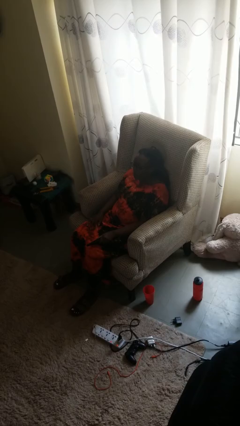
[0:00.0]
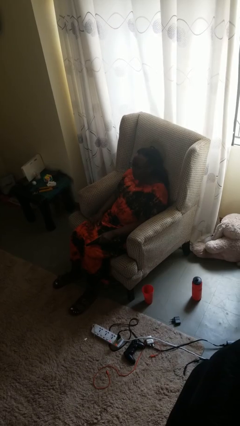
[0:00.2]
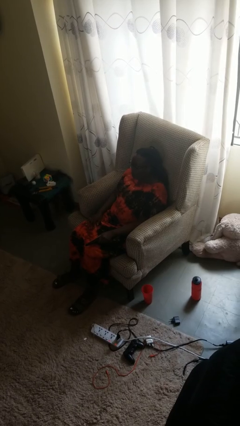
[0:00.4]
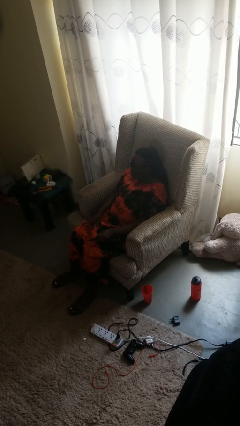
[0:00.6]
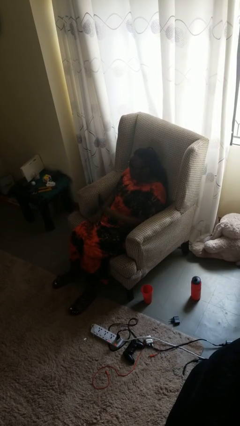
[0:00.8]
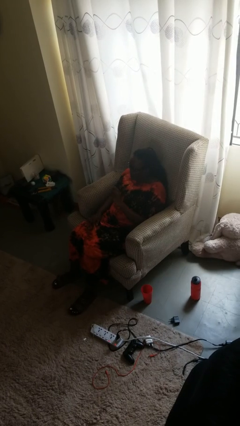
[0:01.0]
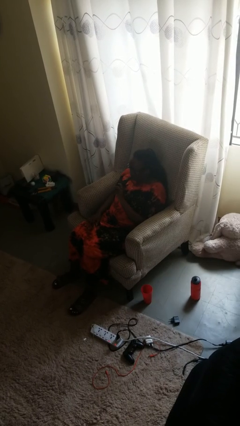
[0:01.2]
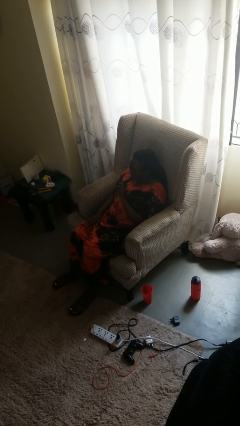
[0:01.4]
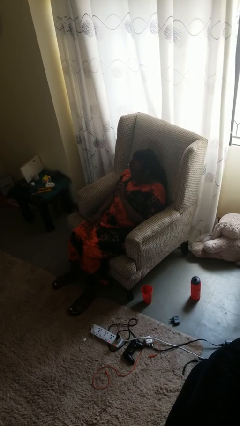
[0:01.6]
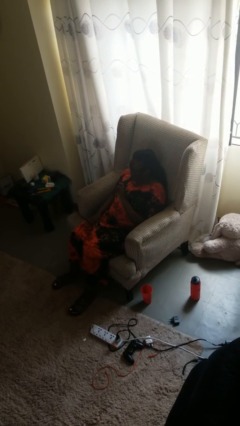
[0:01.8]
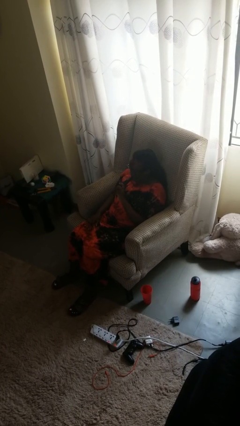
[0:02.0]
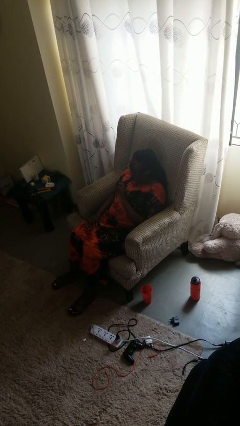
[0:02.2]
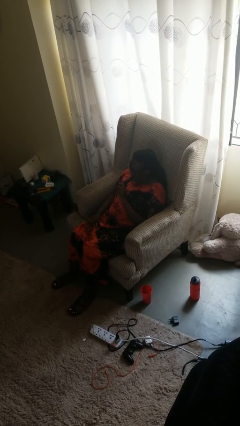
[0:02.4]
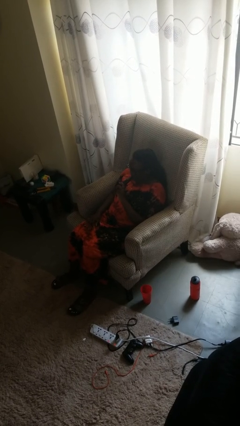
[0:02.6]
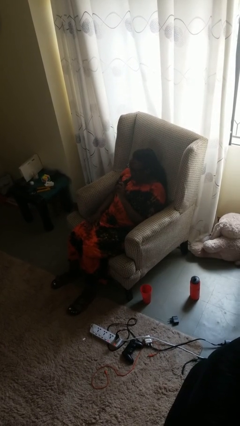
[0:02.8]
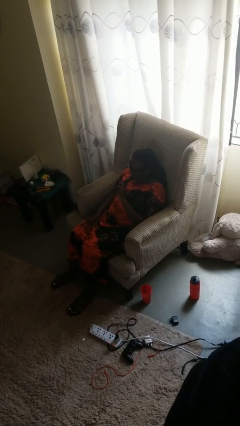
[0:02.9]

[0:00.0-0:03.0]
person vapes

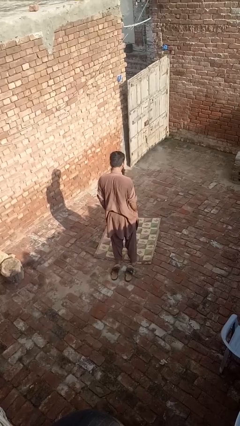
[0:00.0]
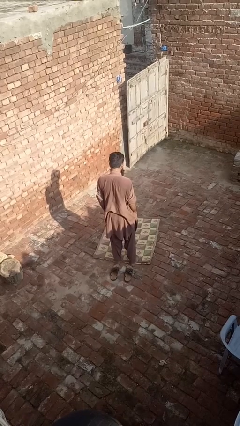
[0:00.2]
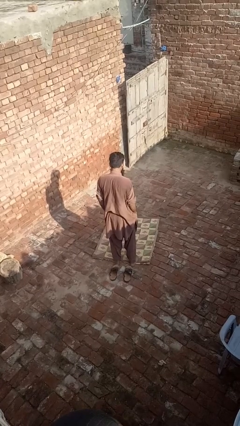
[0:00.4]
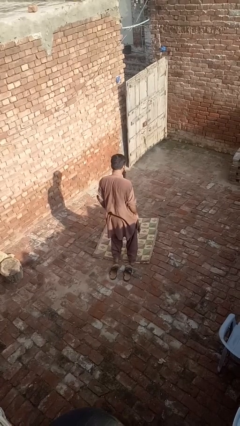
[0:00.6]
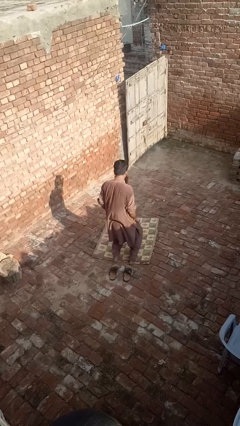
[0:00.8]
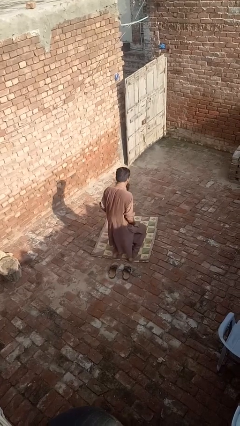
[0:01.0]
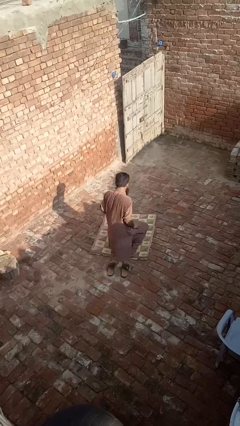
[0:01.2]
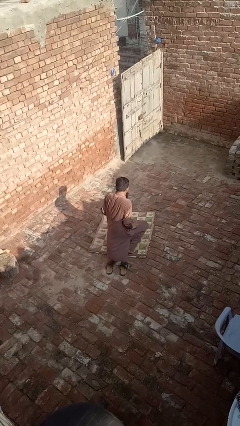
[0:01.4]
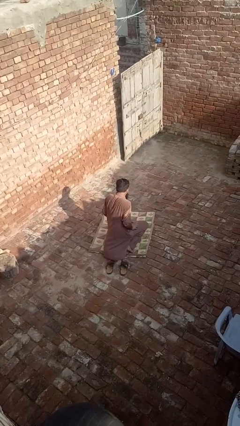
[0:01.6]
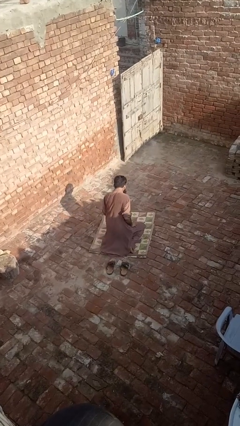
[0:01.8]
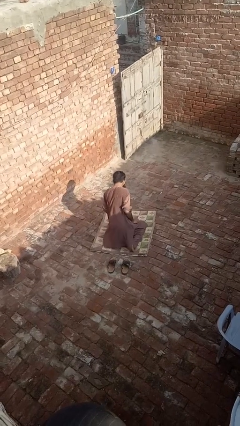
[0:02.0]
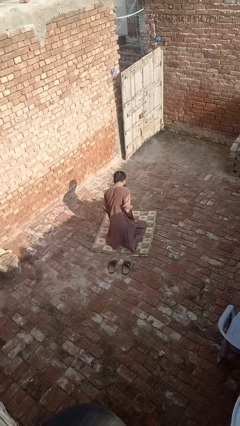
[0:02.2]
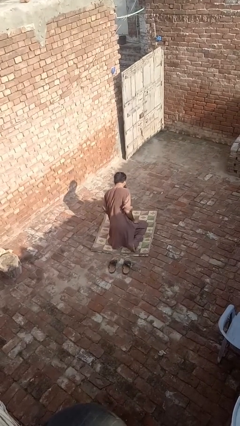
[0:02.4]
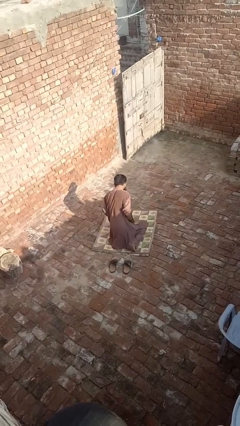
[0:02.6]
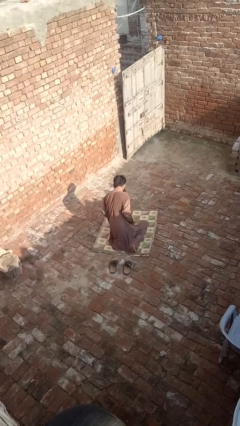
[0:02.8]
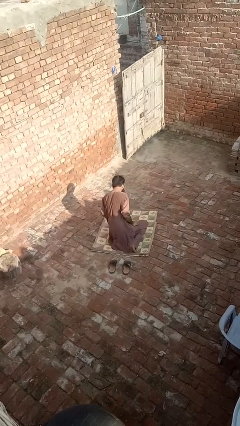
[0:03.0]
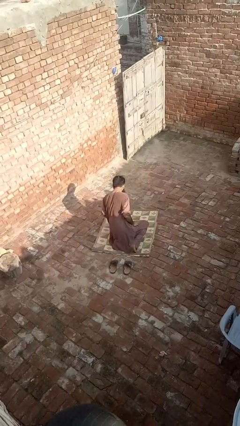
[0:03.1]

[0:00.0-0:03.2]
person kneels

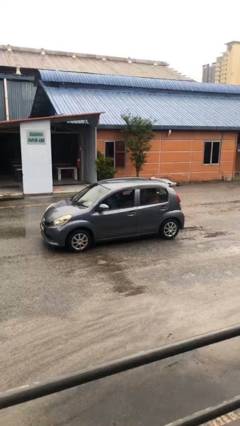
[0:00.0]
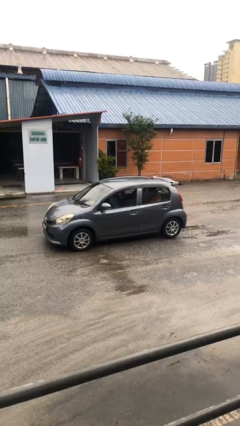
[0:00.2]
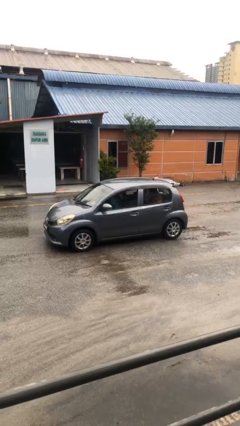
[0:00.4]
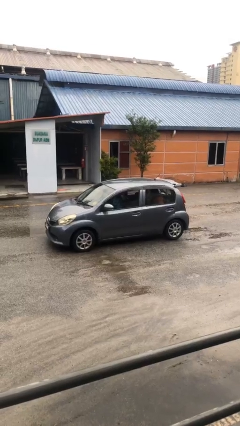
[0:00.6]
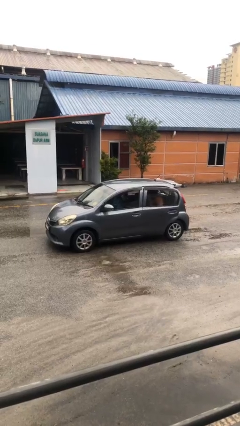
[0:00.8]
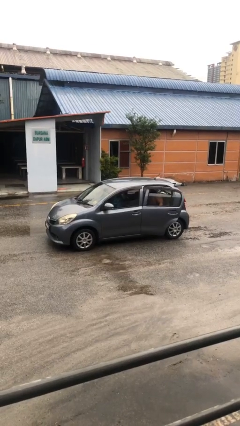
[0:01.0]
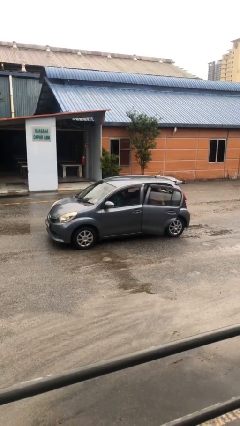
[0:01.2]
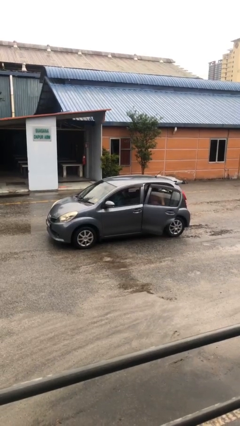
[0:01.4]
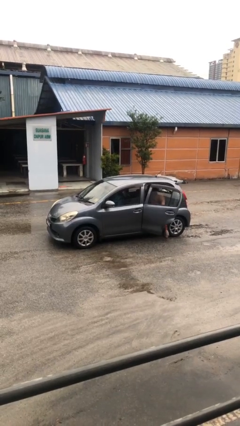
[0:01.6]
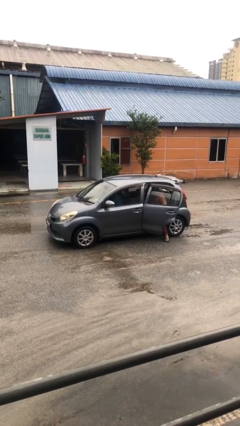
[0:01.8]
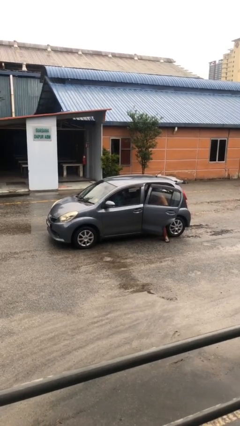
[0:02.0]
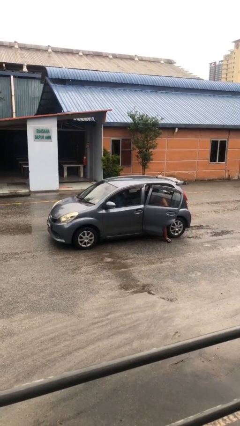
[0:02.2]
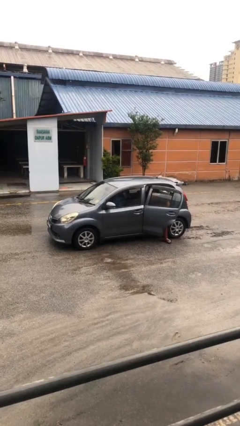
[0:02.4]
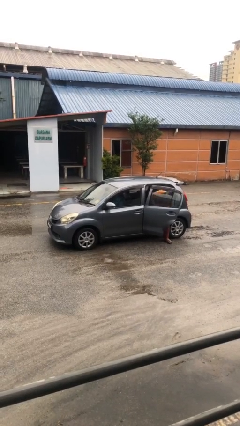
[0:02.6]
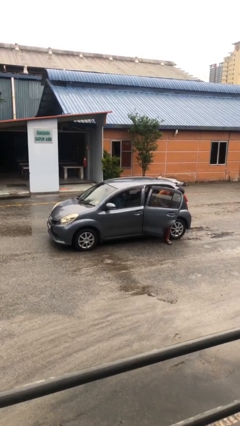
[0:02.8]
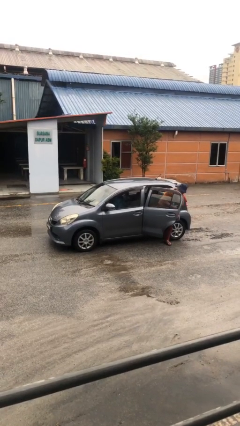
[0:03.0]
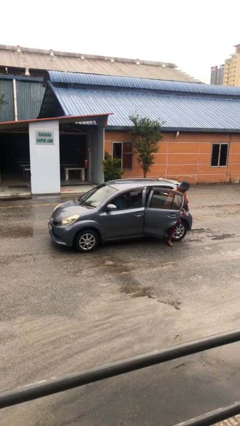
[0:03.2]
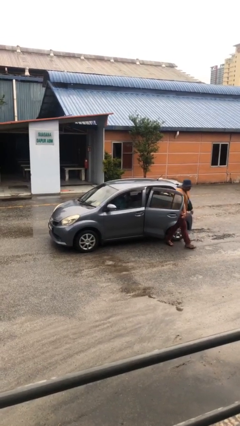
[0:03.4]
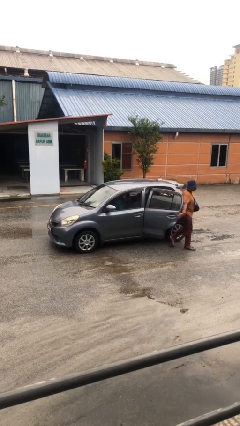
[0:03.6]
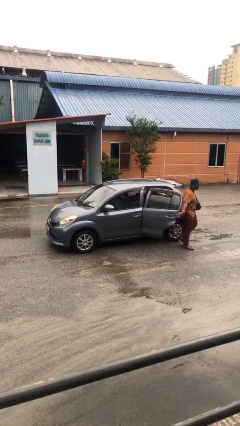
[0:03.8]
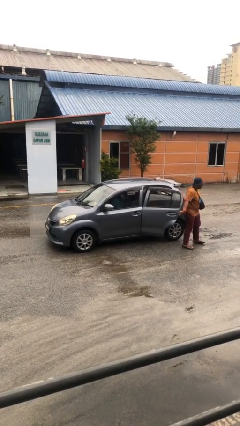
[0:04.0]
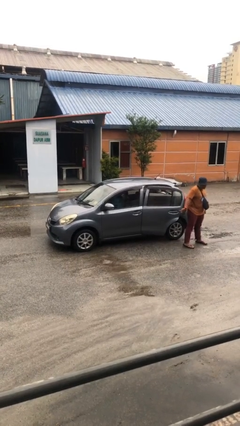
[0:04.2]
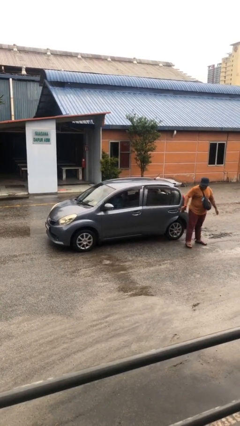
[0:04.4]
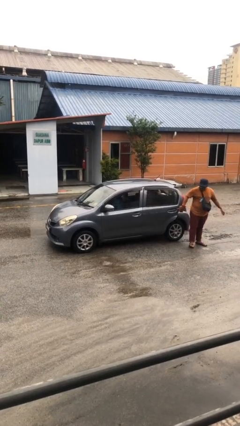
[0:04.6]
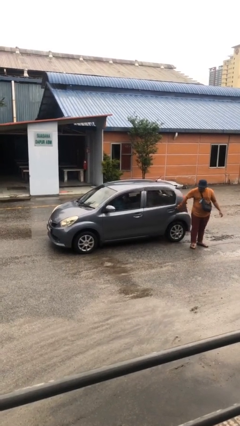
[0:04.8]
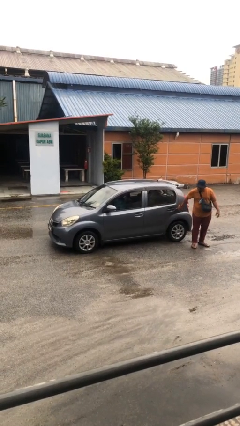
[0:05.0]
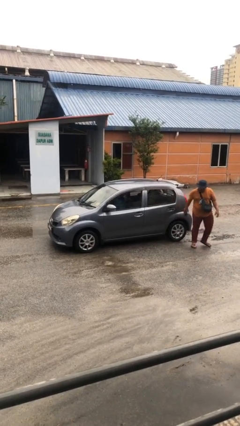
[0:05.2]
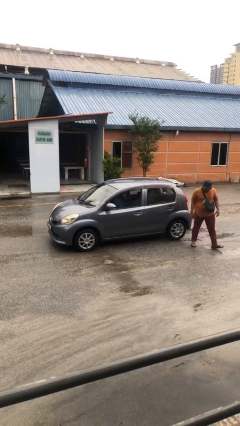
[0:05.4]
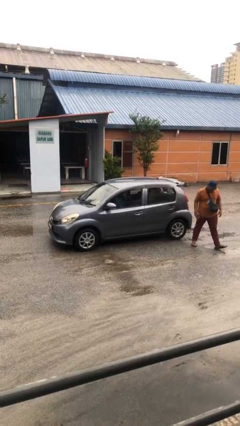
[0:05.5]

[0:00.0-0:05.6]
car drops off person

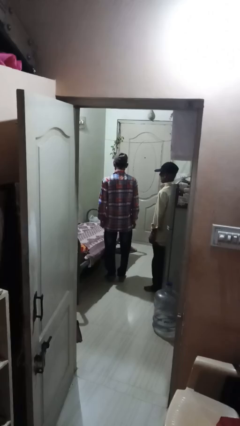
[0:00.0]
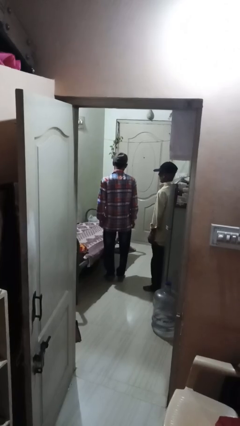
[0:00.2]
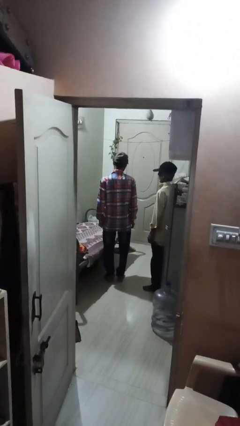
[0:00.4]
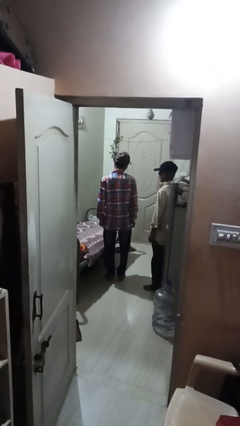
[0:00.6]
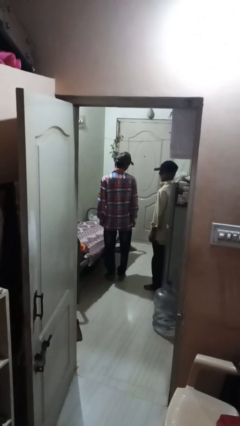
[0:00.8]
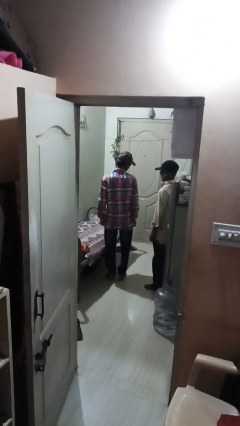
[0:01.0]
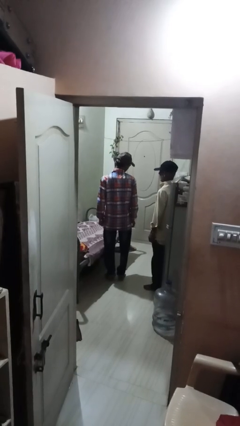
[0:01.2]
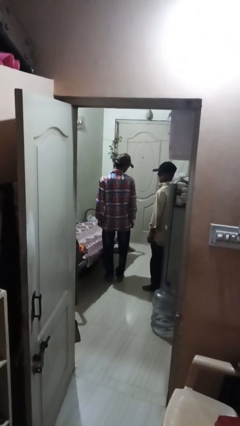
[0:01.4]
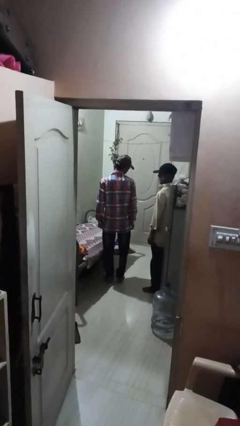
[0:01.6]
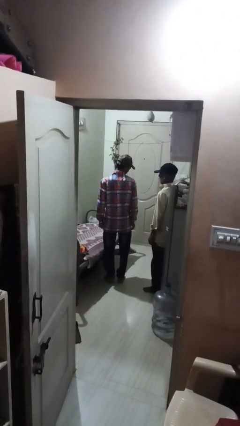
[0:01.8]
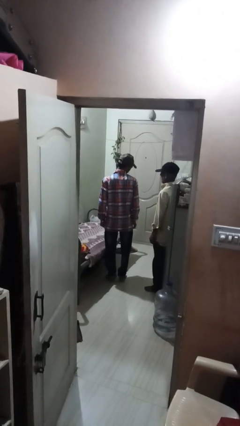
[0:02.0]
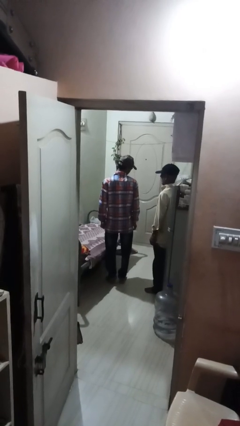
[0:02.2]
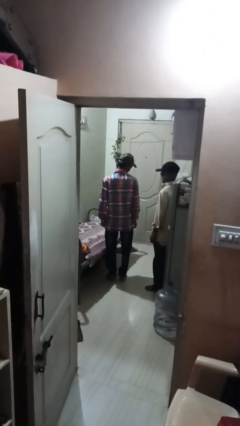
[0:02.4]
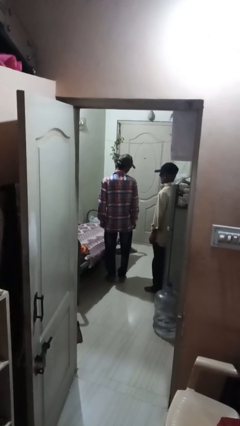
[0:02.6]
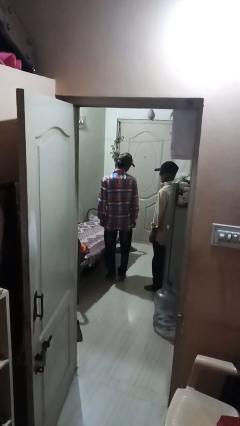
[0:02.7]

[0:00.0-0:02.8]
person looks over shoulder

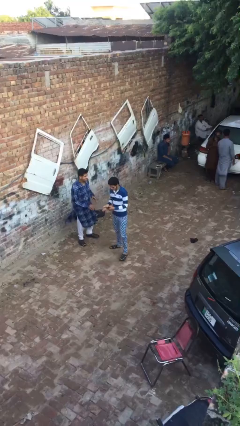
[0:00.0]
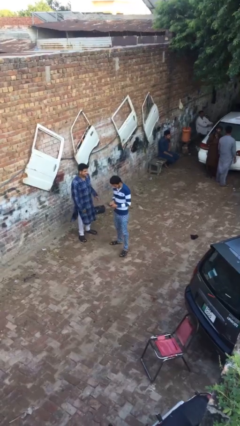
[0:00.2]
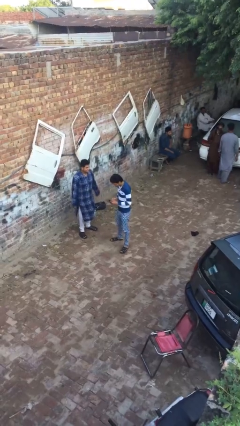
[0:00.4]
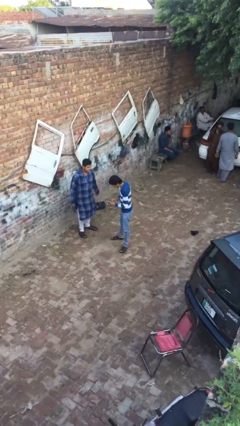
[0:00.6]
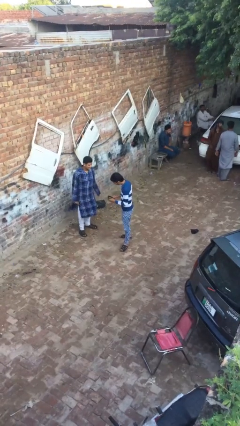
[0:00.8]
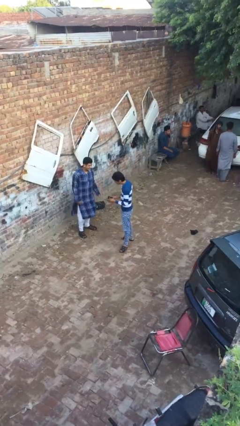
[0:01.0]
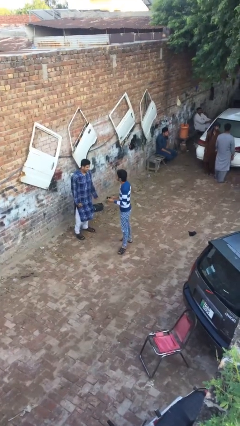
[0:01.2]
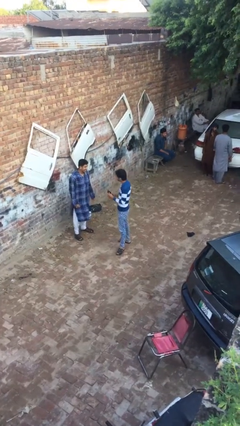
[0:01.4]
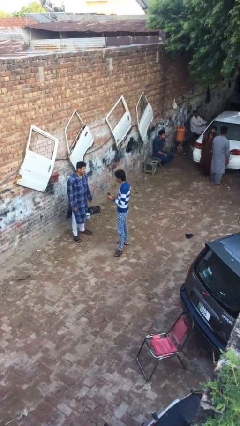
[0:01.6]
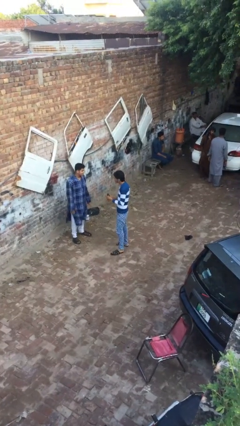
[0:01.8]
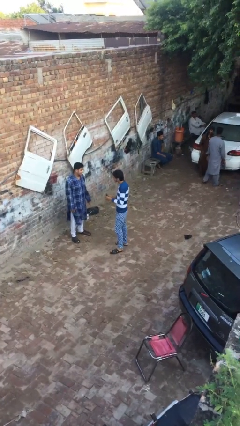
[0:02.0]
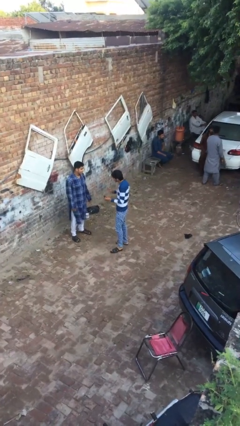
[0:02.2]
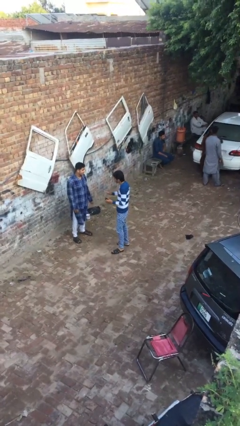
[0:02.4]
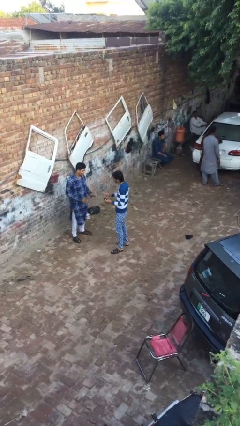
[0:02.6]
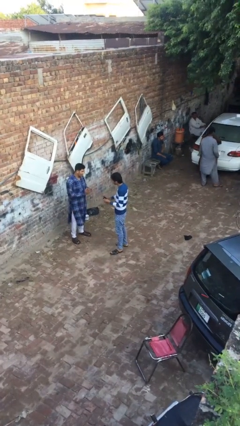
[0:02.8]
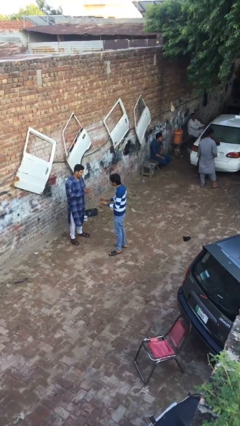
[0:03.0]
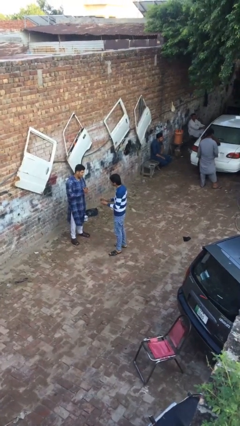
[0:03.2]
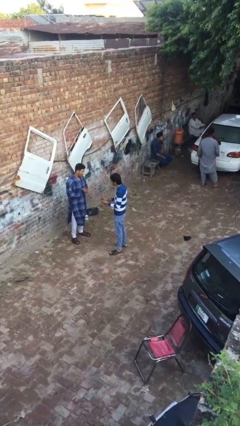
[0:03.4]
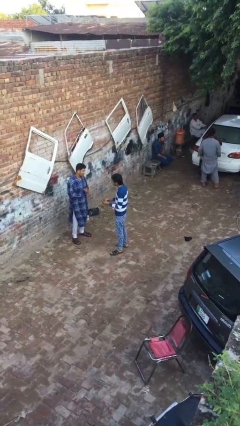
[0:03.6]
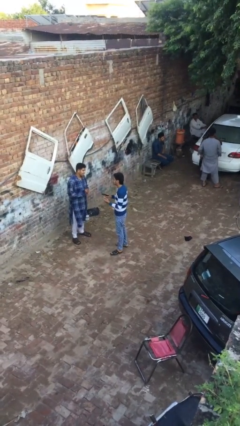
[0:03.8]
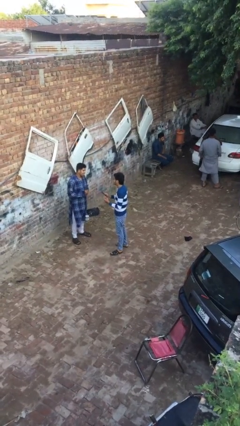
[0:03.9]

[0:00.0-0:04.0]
person talks to person
